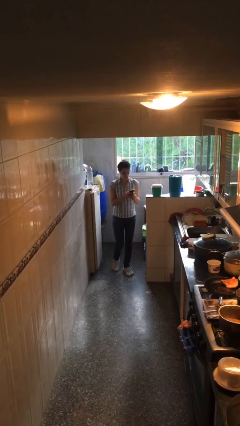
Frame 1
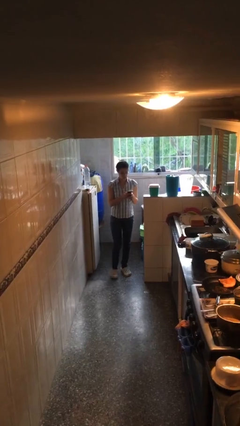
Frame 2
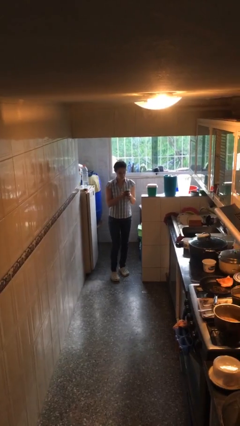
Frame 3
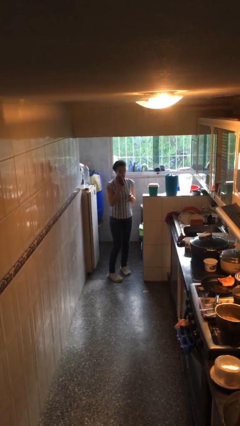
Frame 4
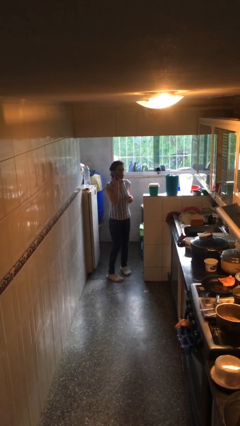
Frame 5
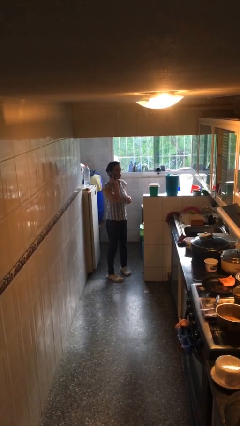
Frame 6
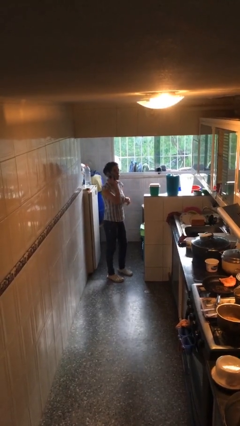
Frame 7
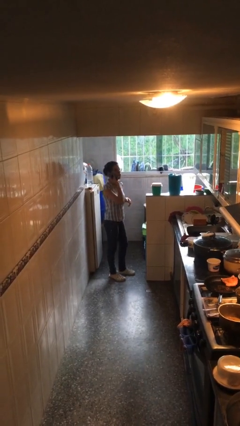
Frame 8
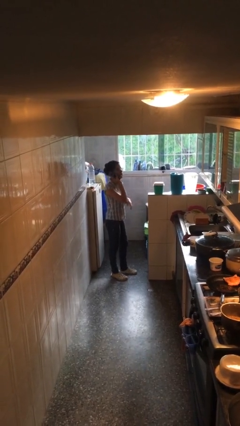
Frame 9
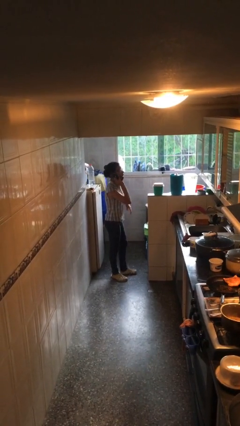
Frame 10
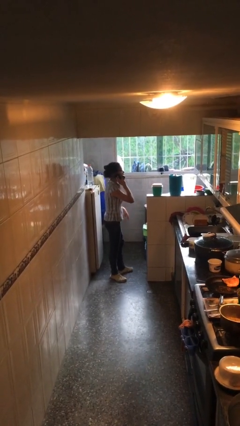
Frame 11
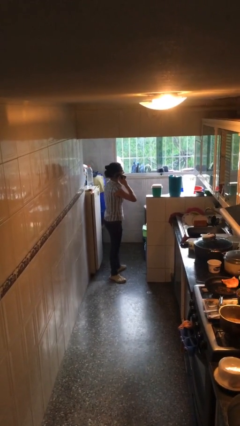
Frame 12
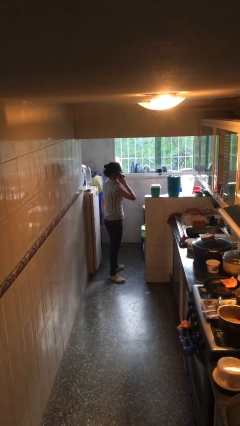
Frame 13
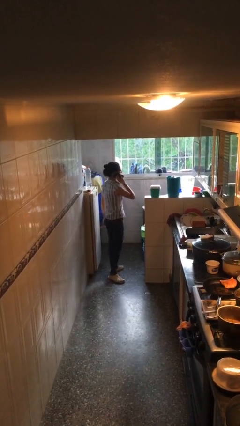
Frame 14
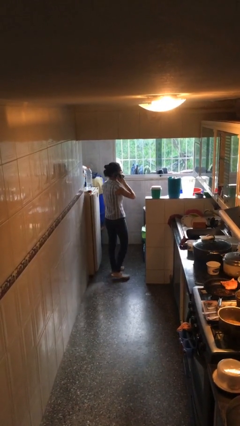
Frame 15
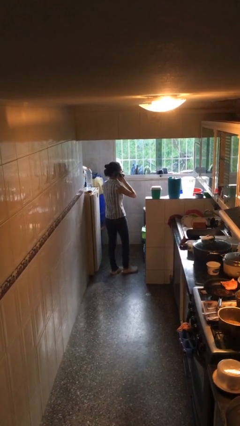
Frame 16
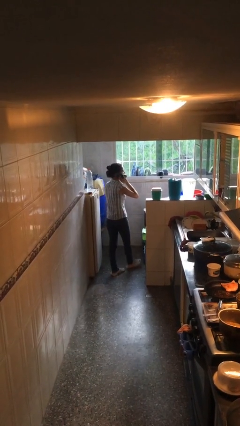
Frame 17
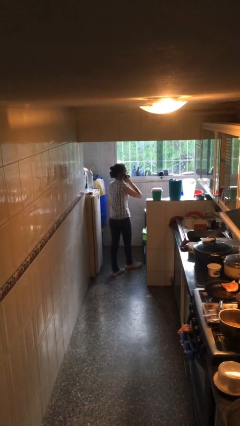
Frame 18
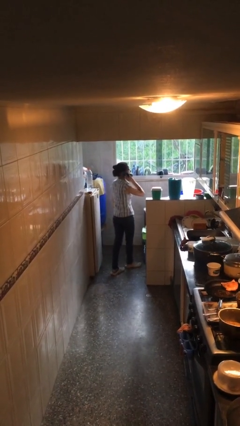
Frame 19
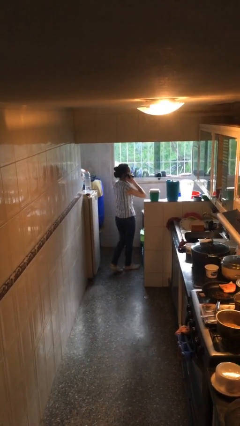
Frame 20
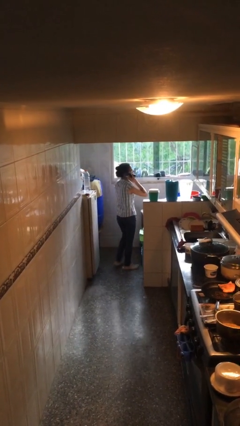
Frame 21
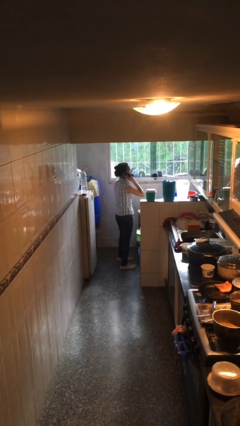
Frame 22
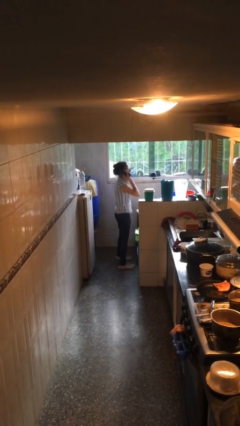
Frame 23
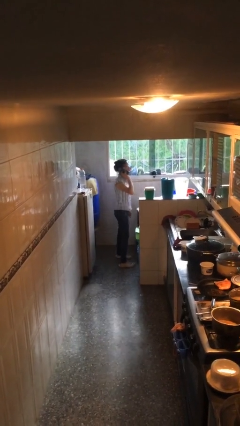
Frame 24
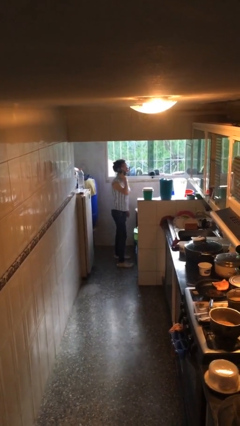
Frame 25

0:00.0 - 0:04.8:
person talks on phone

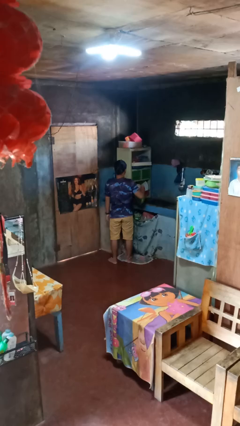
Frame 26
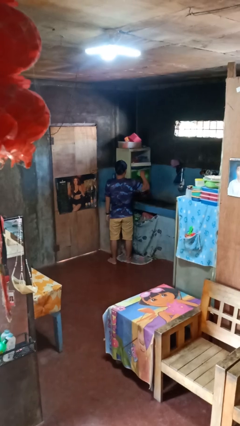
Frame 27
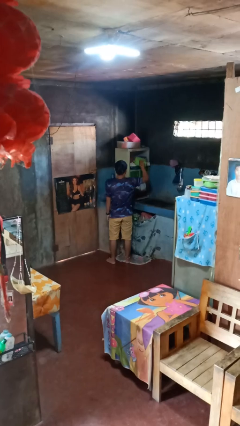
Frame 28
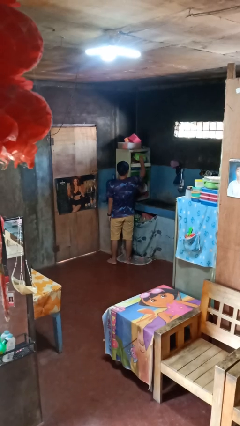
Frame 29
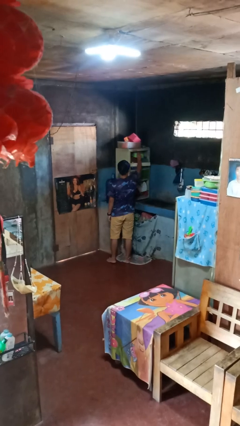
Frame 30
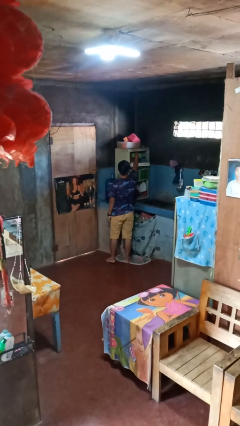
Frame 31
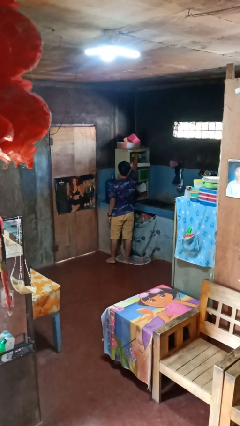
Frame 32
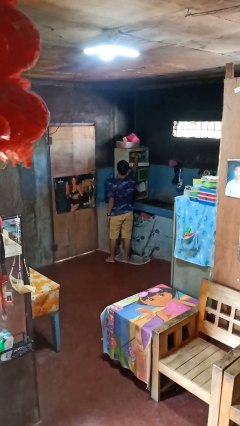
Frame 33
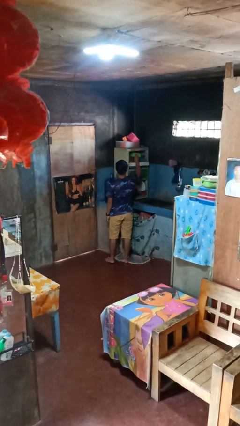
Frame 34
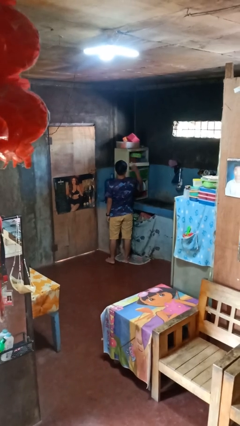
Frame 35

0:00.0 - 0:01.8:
person puts object in cabinet

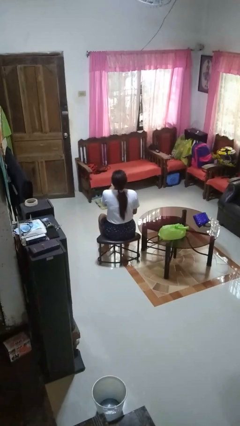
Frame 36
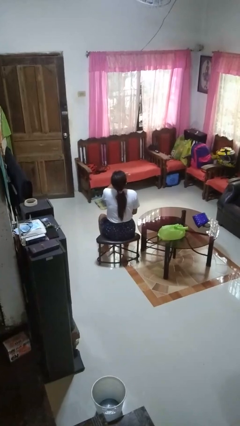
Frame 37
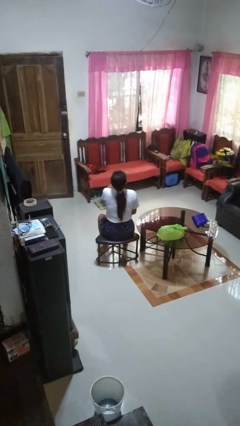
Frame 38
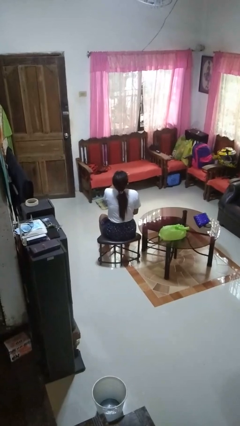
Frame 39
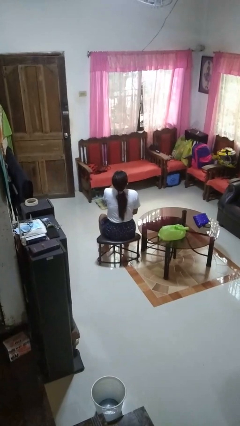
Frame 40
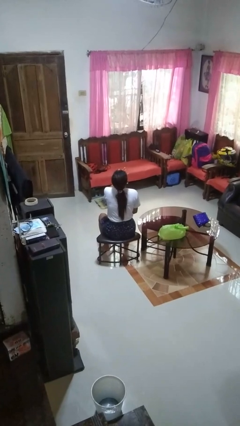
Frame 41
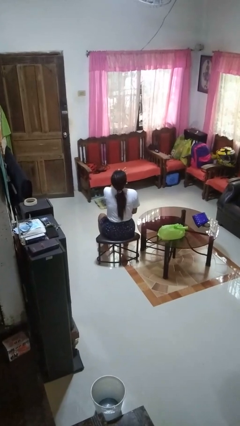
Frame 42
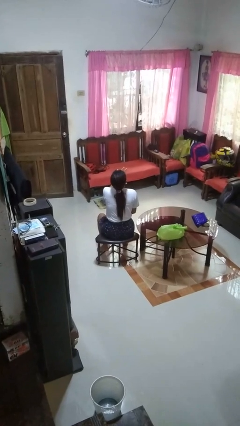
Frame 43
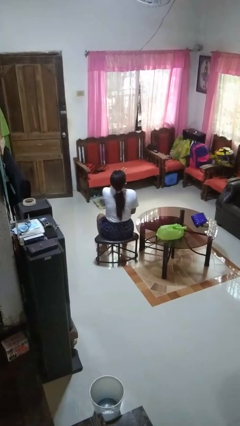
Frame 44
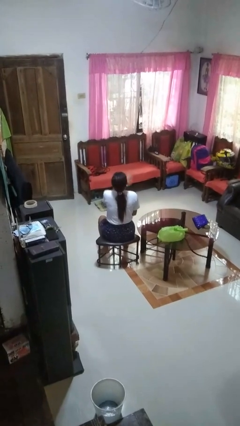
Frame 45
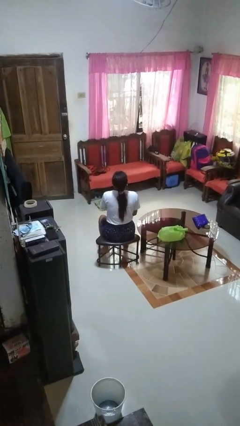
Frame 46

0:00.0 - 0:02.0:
person licks fingers

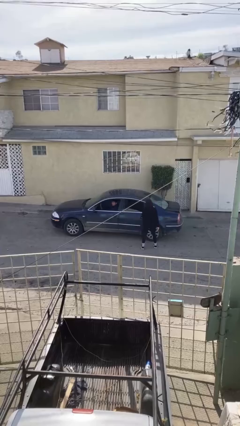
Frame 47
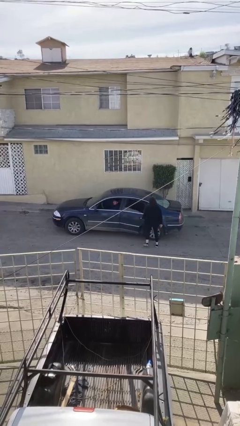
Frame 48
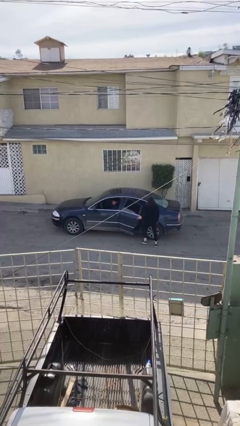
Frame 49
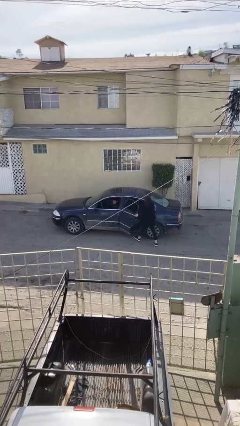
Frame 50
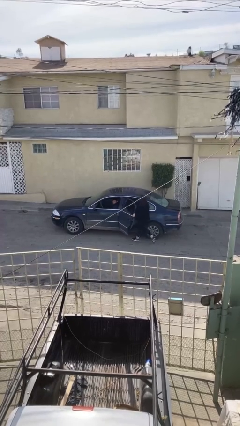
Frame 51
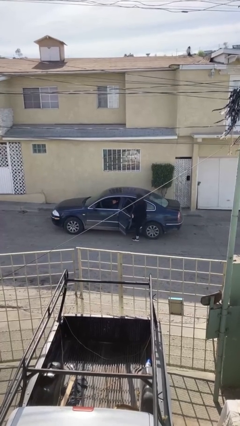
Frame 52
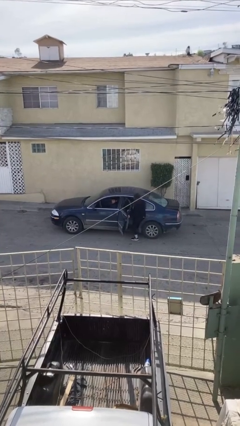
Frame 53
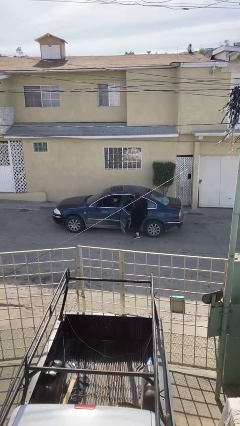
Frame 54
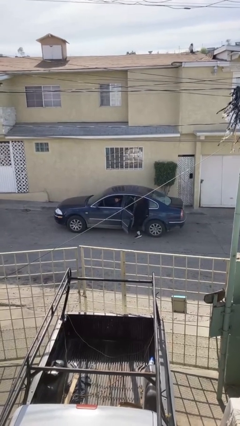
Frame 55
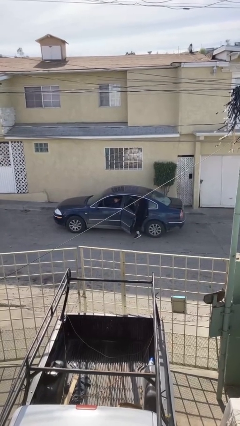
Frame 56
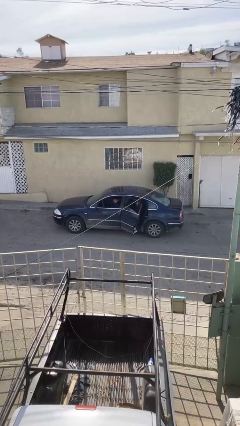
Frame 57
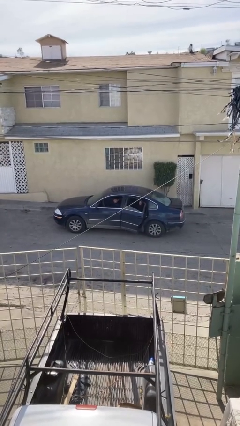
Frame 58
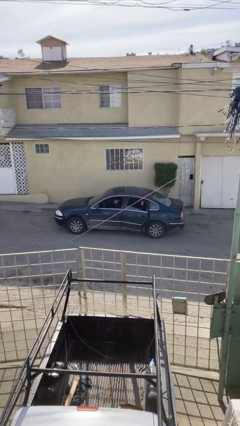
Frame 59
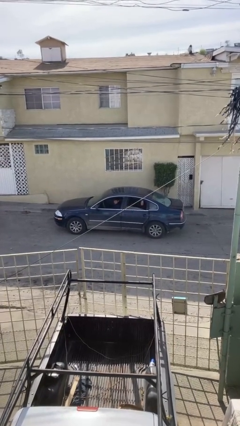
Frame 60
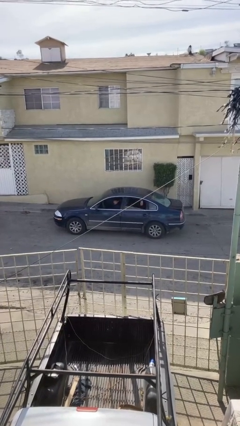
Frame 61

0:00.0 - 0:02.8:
car picks up person

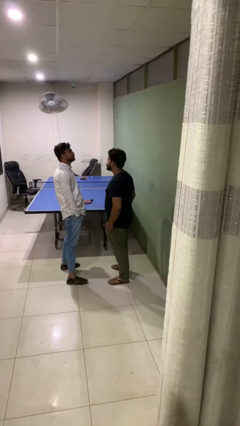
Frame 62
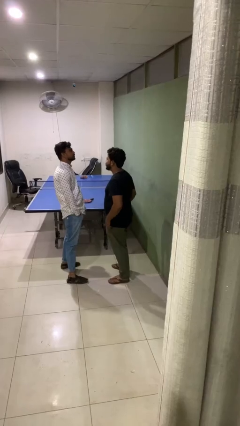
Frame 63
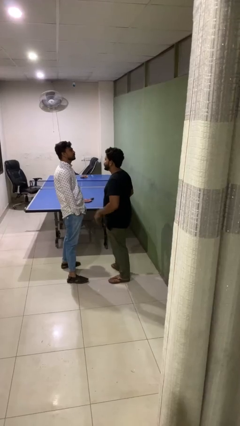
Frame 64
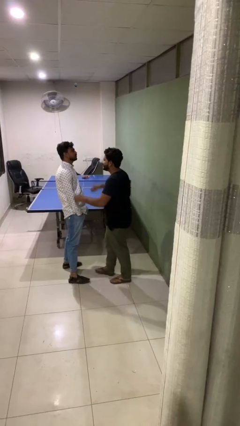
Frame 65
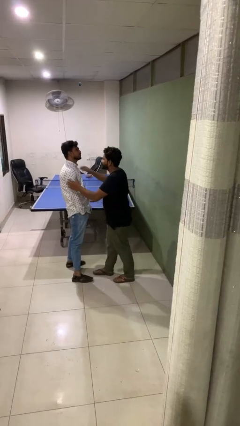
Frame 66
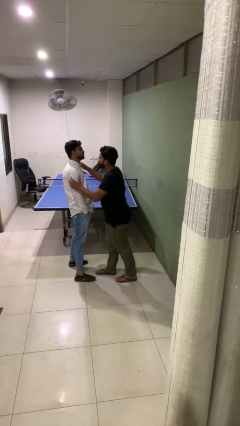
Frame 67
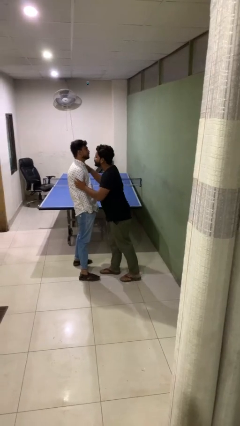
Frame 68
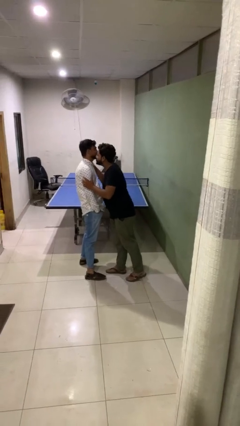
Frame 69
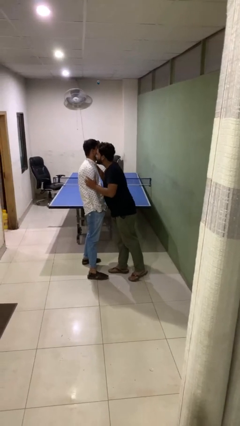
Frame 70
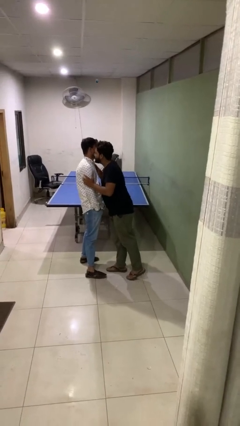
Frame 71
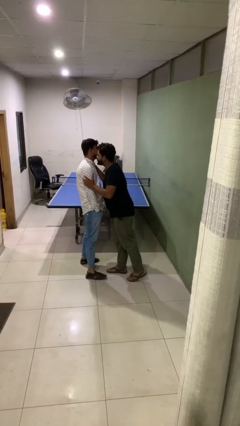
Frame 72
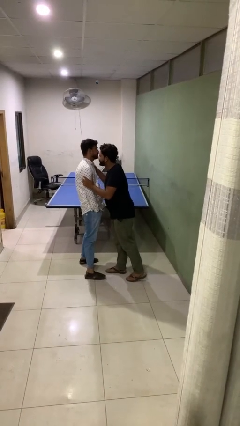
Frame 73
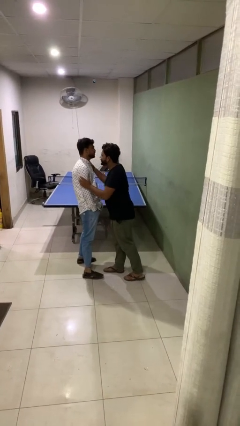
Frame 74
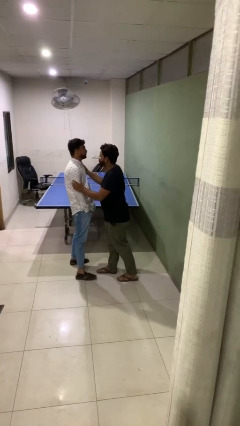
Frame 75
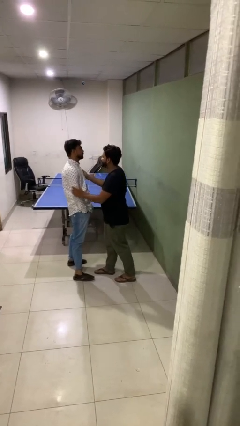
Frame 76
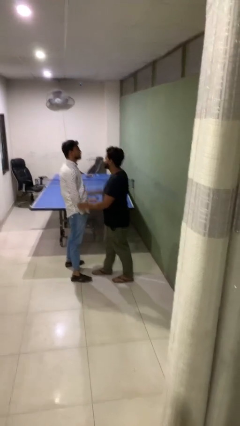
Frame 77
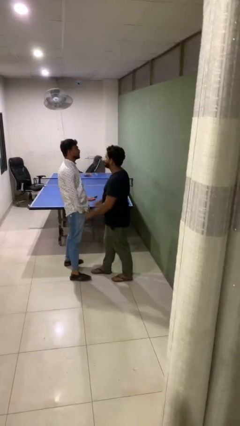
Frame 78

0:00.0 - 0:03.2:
person kisses cheek of person

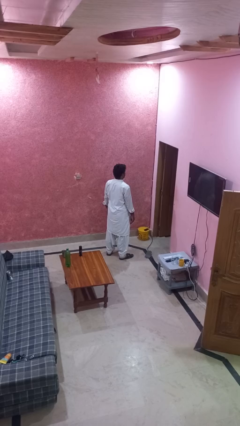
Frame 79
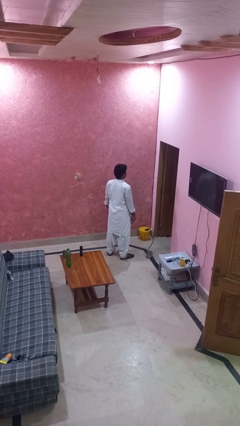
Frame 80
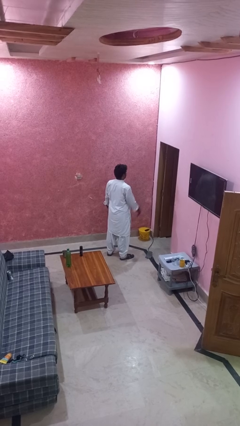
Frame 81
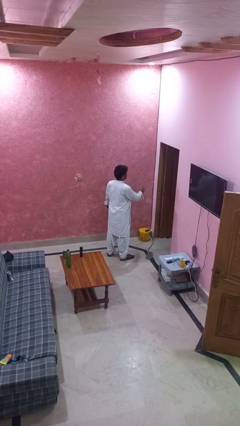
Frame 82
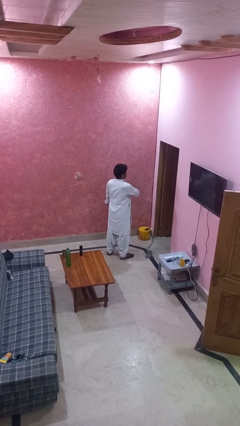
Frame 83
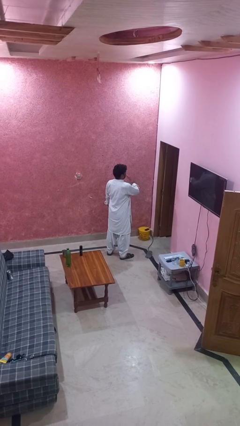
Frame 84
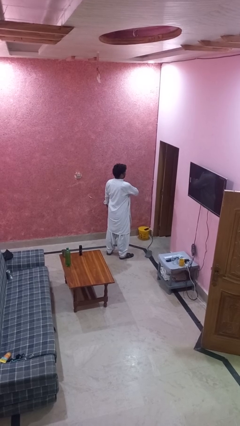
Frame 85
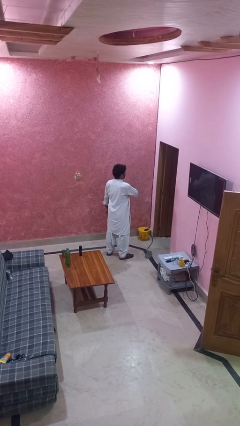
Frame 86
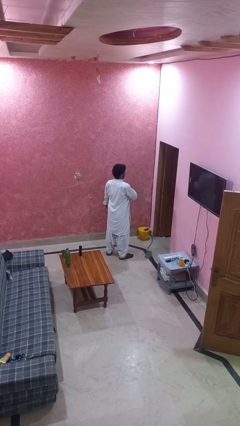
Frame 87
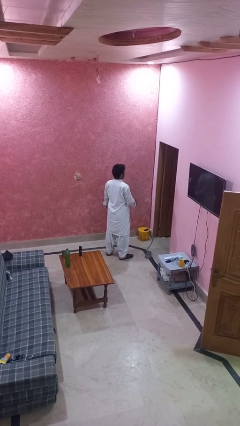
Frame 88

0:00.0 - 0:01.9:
person drums on chest

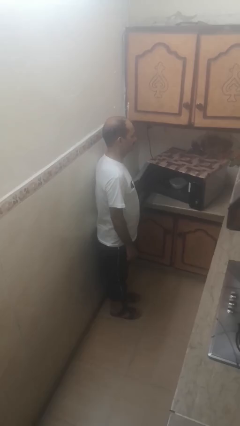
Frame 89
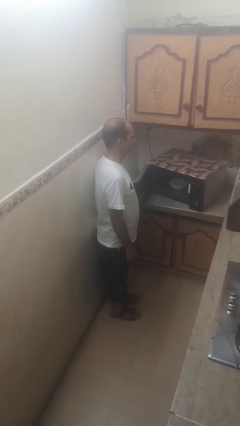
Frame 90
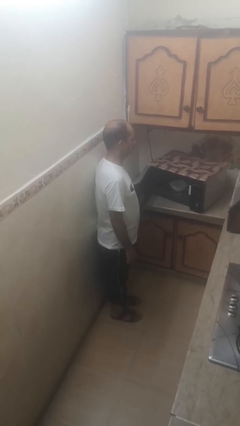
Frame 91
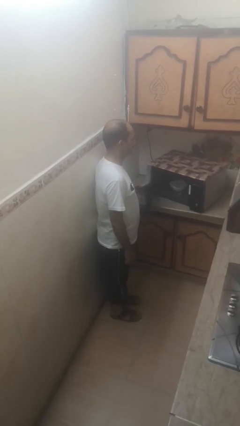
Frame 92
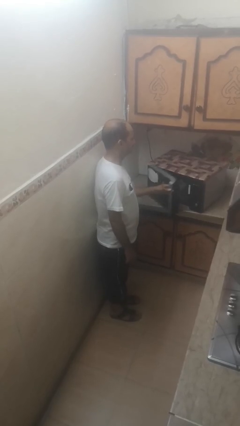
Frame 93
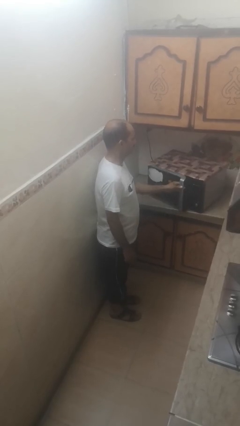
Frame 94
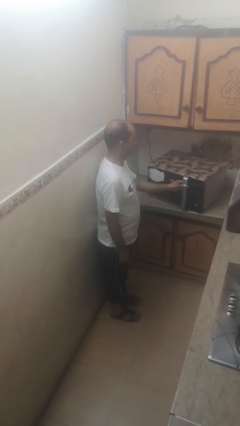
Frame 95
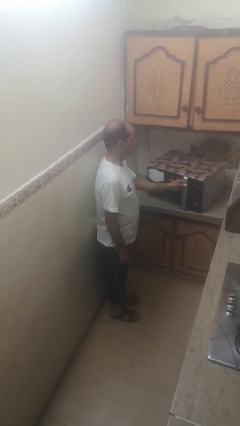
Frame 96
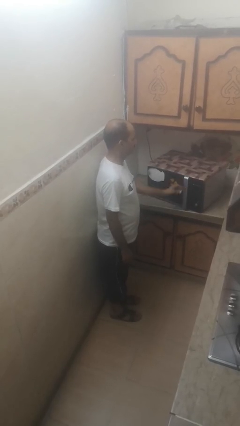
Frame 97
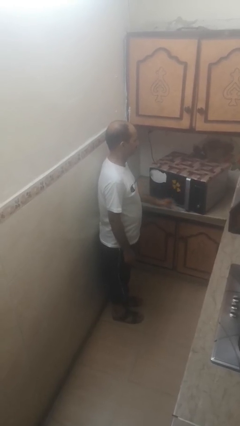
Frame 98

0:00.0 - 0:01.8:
person closes microwave
